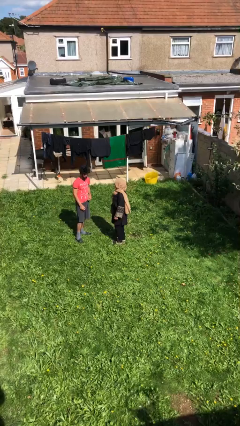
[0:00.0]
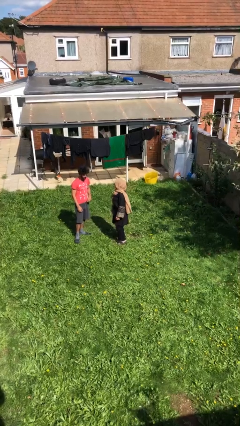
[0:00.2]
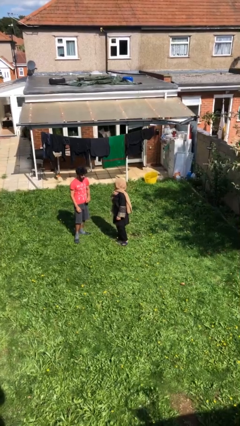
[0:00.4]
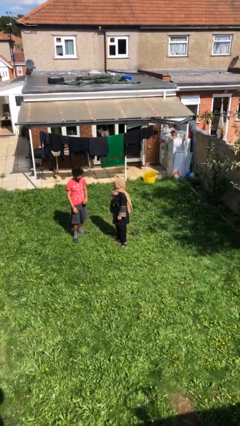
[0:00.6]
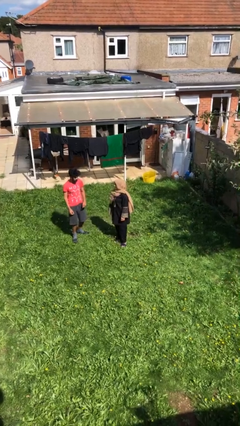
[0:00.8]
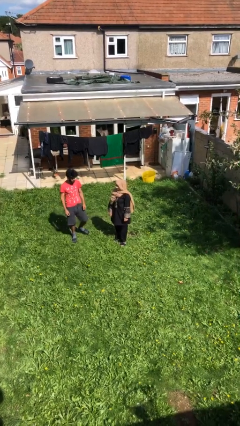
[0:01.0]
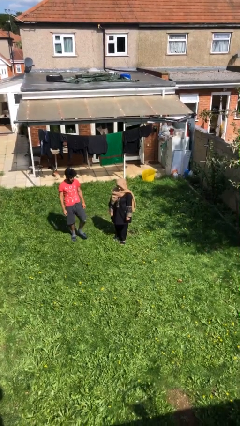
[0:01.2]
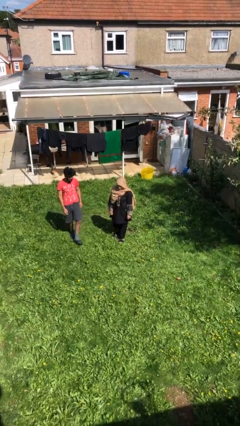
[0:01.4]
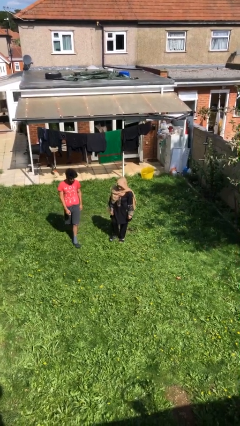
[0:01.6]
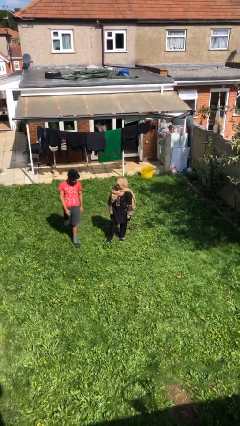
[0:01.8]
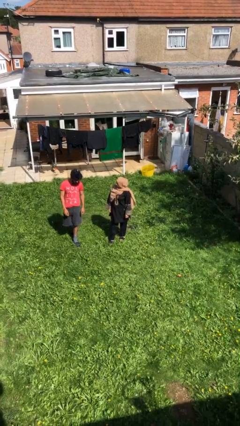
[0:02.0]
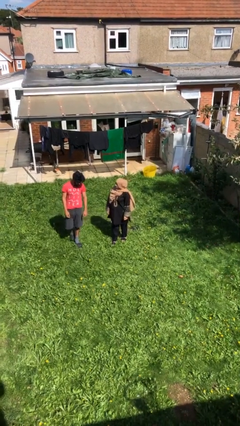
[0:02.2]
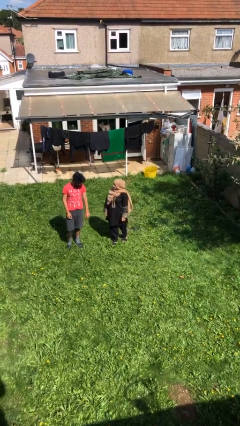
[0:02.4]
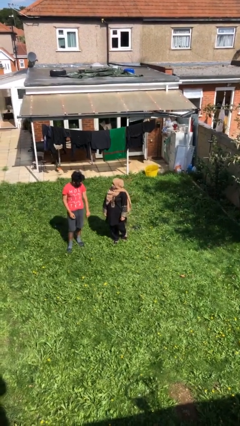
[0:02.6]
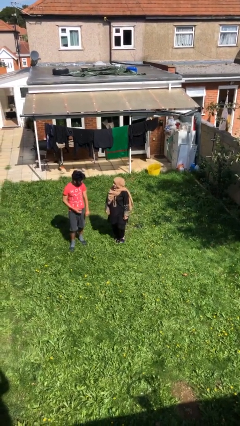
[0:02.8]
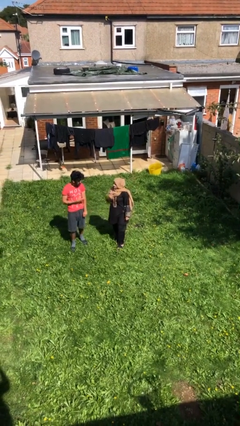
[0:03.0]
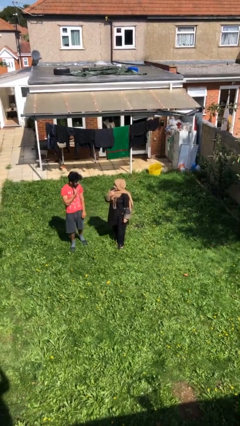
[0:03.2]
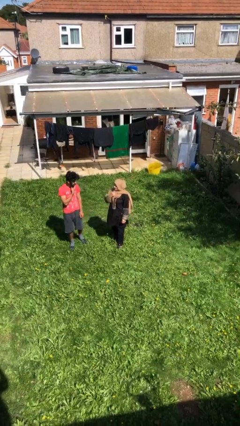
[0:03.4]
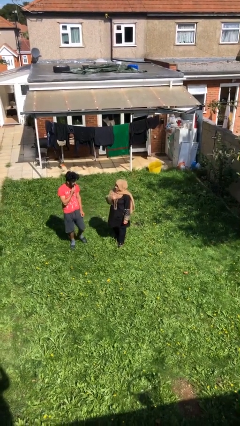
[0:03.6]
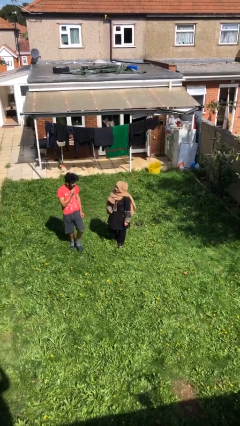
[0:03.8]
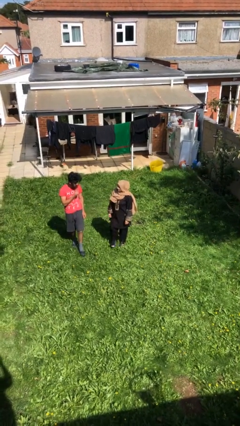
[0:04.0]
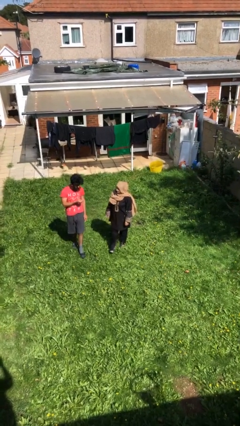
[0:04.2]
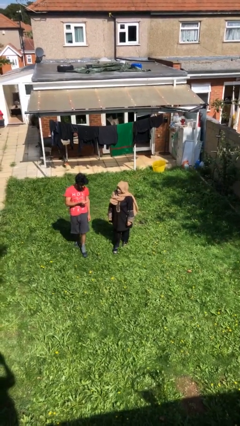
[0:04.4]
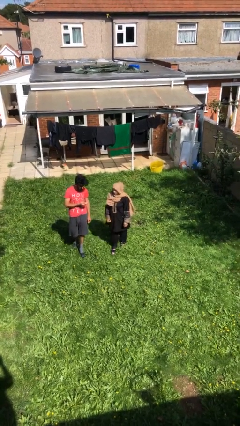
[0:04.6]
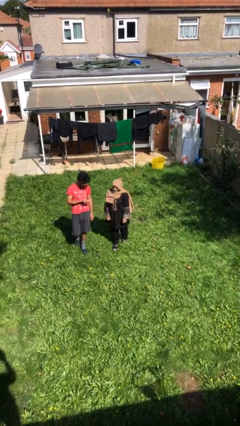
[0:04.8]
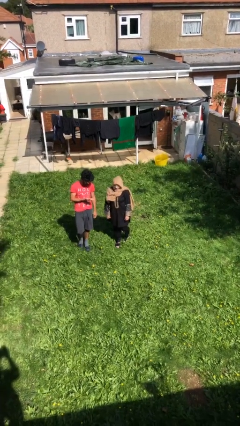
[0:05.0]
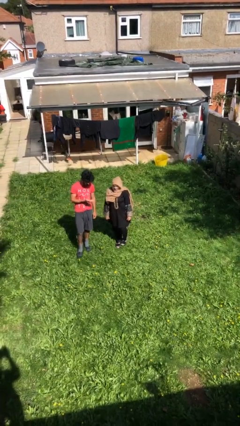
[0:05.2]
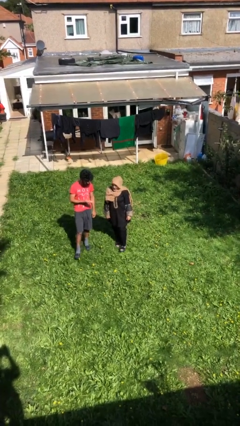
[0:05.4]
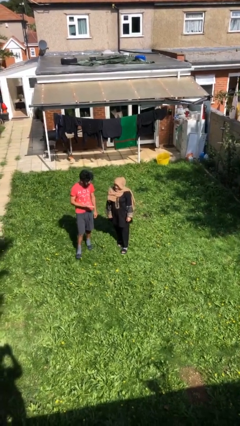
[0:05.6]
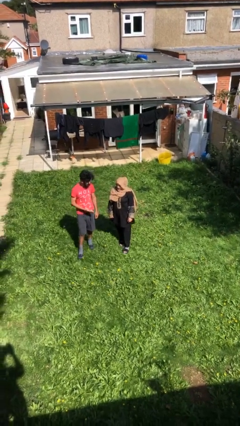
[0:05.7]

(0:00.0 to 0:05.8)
person talks to person

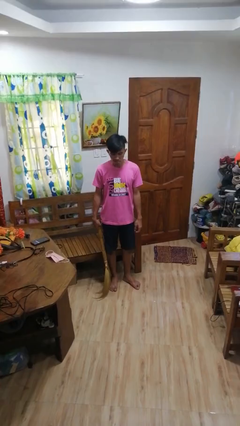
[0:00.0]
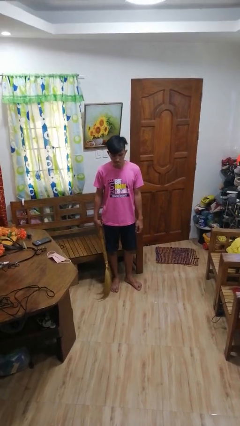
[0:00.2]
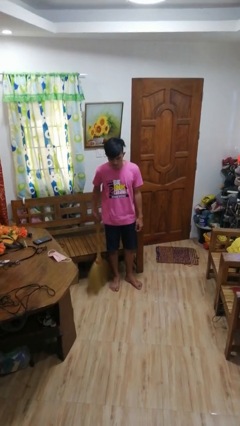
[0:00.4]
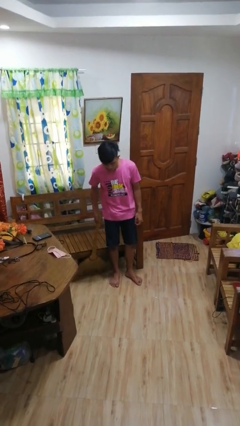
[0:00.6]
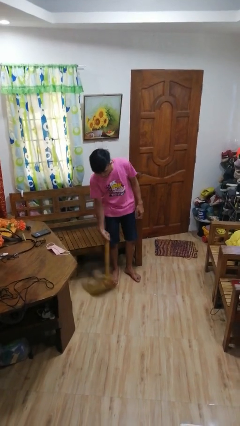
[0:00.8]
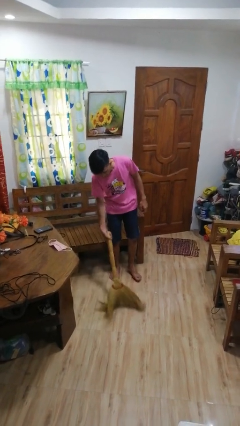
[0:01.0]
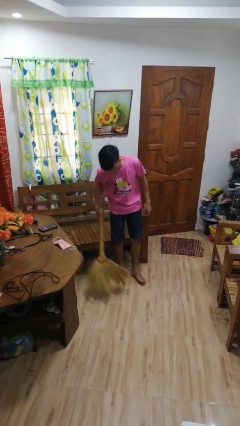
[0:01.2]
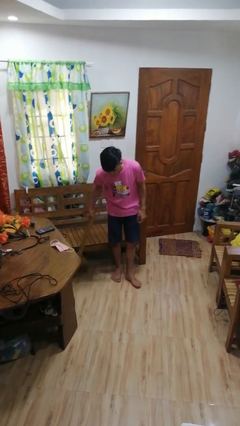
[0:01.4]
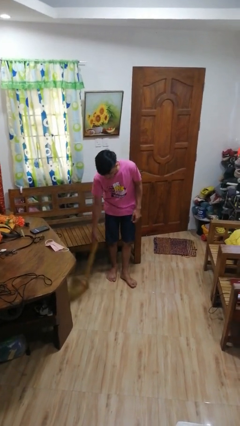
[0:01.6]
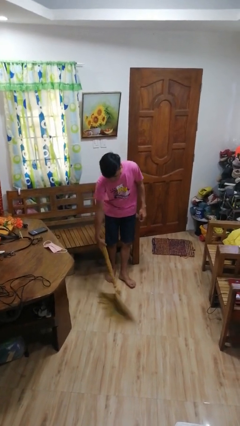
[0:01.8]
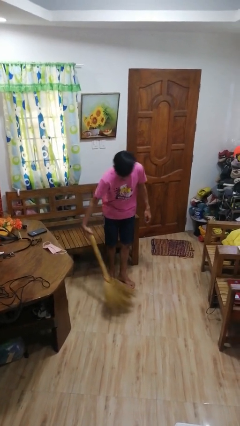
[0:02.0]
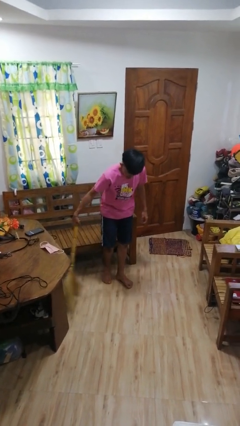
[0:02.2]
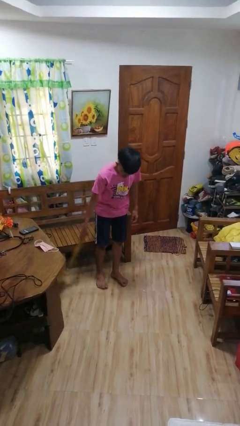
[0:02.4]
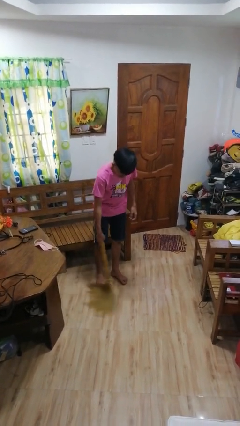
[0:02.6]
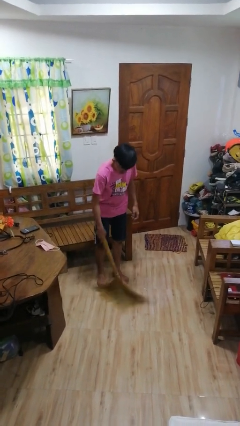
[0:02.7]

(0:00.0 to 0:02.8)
person sweeps floor

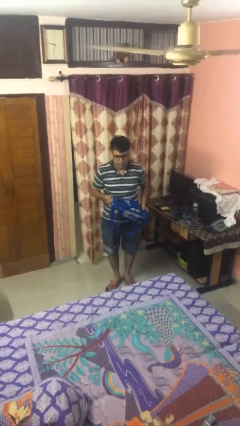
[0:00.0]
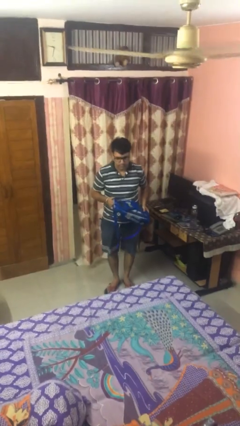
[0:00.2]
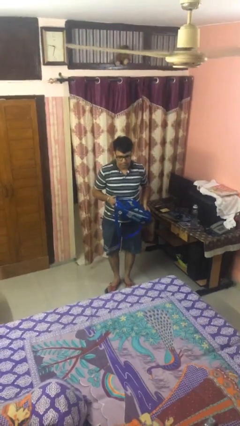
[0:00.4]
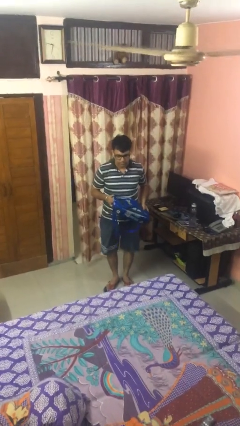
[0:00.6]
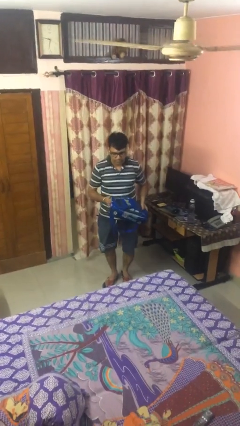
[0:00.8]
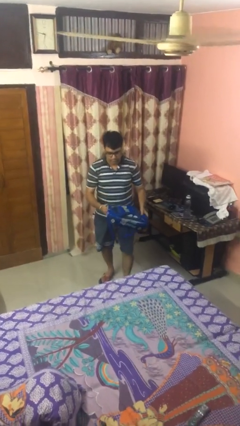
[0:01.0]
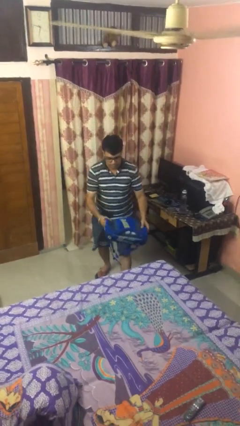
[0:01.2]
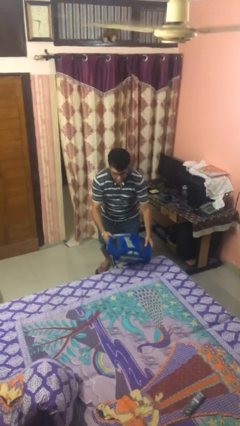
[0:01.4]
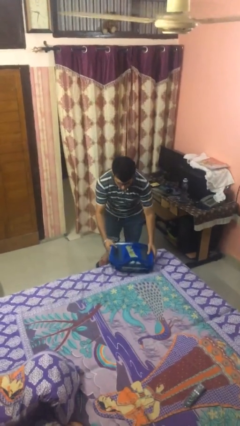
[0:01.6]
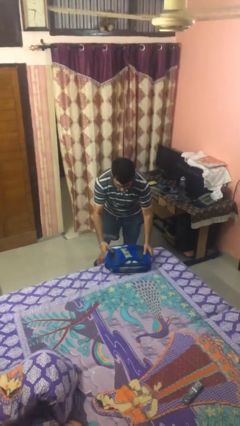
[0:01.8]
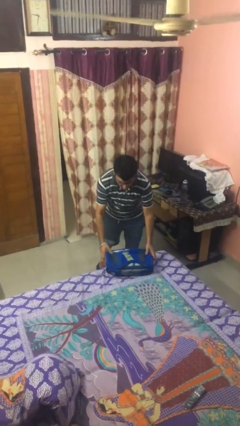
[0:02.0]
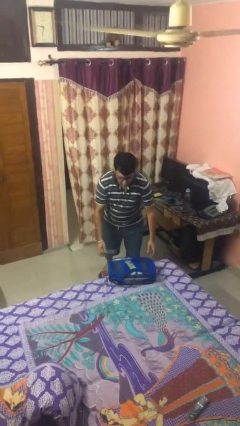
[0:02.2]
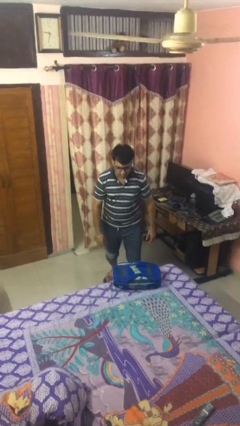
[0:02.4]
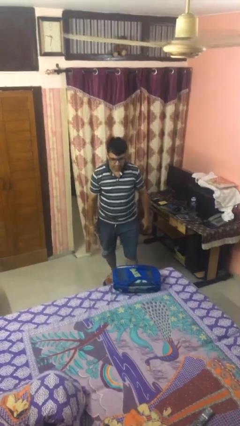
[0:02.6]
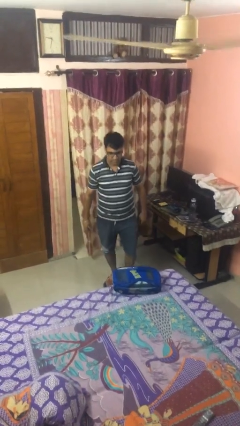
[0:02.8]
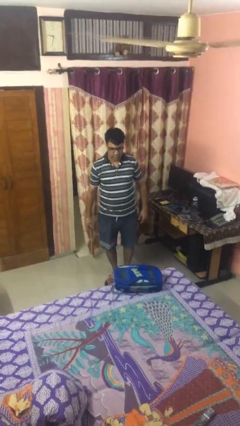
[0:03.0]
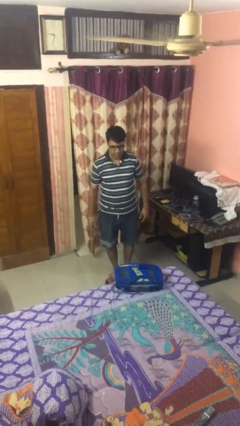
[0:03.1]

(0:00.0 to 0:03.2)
person puts down object on bed

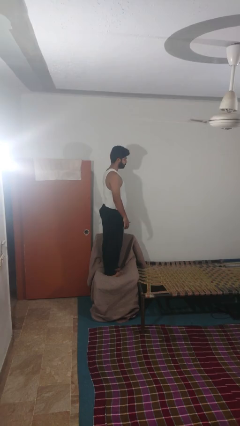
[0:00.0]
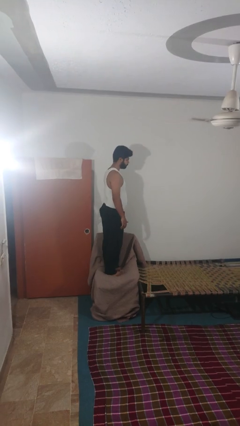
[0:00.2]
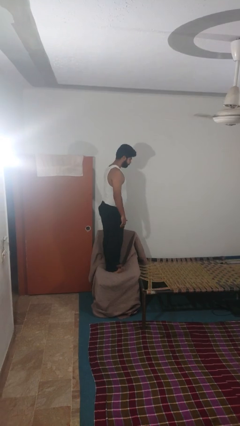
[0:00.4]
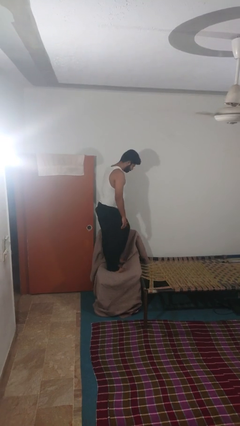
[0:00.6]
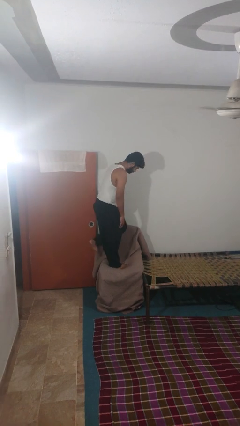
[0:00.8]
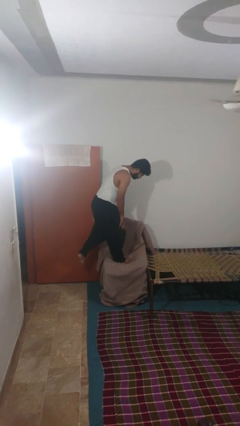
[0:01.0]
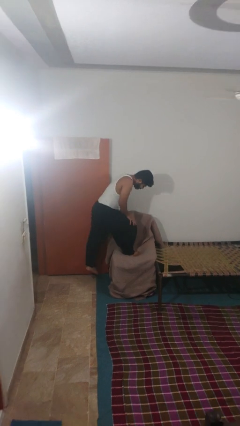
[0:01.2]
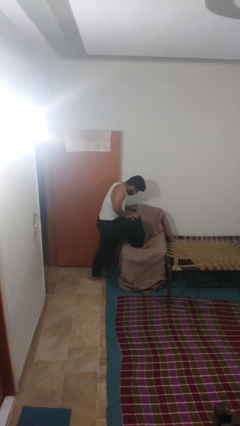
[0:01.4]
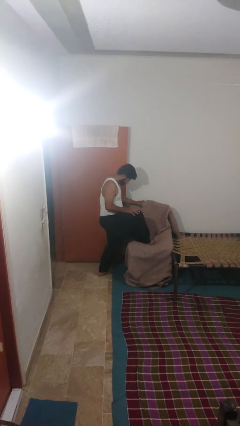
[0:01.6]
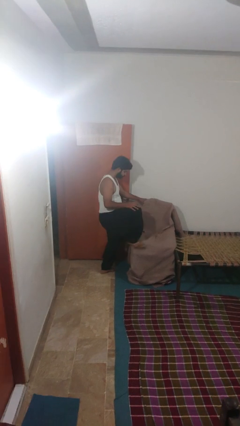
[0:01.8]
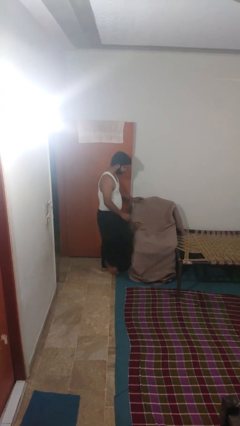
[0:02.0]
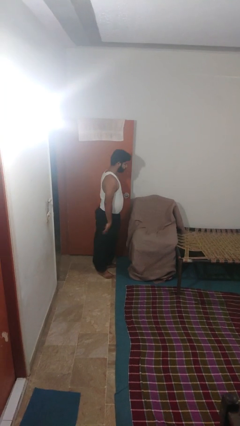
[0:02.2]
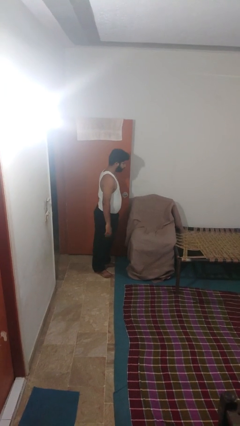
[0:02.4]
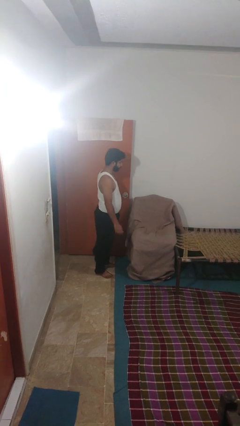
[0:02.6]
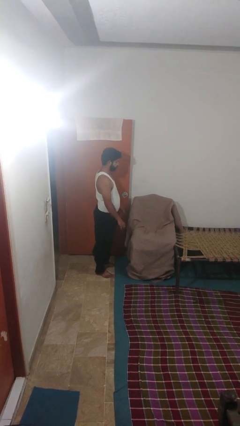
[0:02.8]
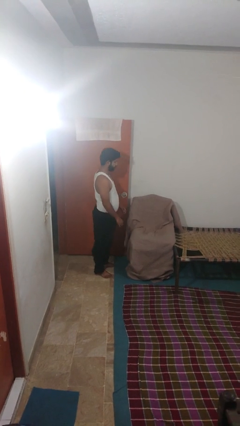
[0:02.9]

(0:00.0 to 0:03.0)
person climbs off couch

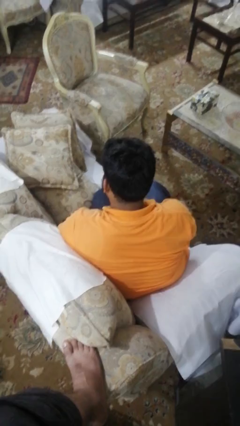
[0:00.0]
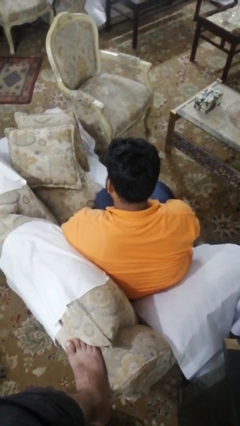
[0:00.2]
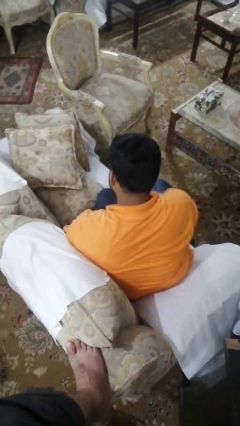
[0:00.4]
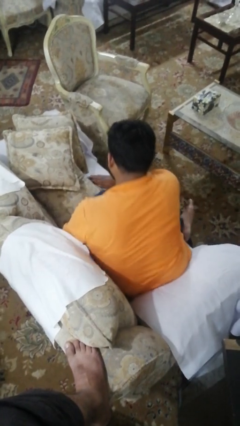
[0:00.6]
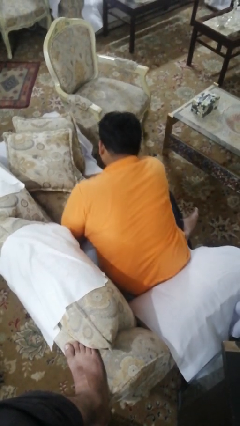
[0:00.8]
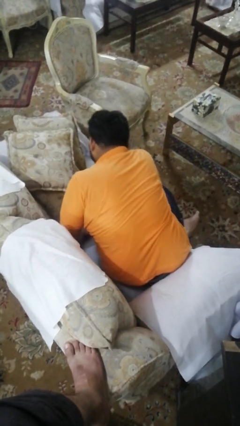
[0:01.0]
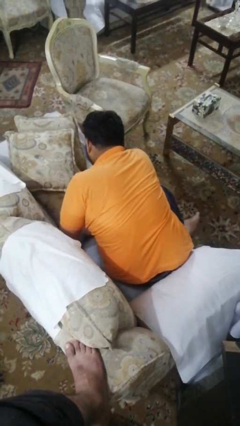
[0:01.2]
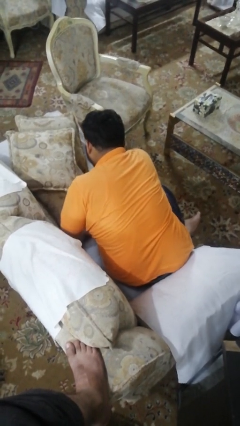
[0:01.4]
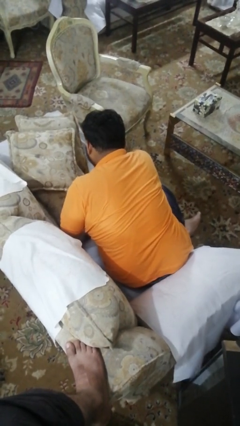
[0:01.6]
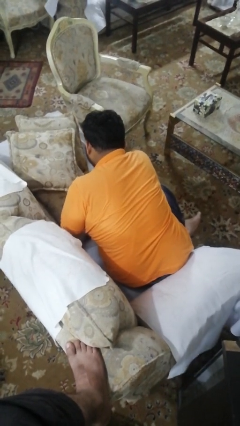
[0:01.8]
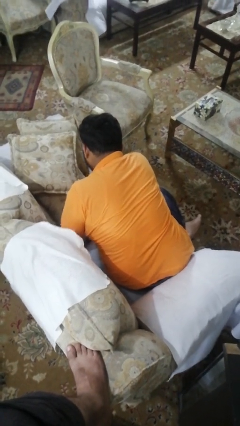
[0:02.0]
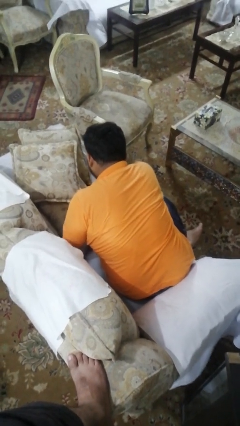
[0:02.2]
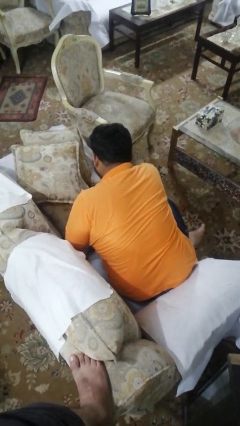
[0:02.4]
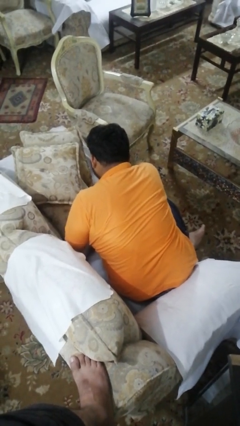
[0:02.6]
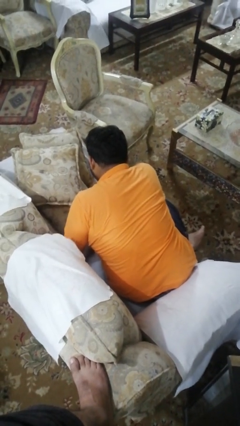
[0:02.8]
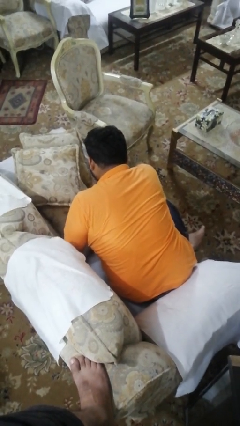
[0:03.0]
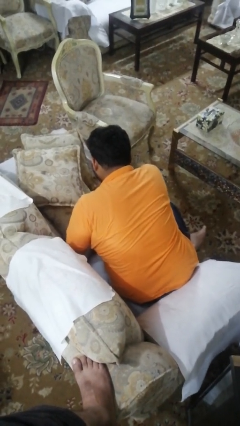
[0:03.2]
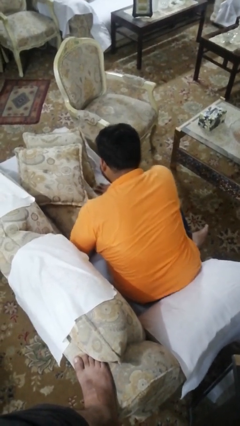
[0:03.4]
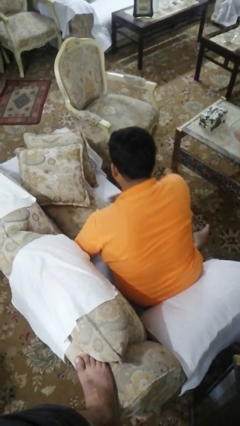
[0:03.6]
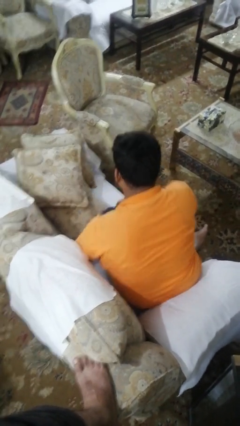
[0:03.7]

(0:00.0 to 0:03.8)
person searches in couch
